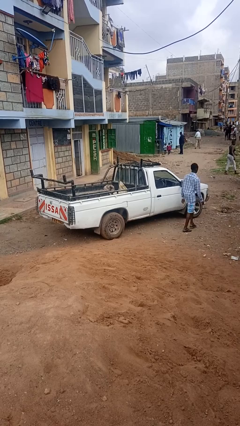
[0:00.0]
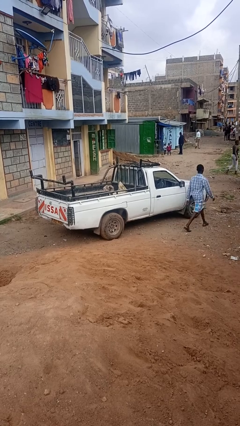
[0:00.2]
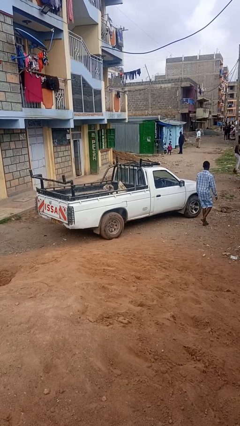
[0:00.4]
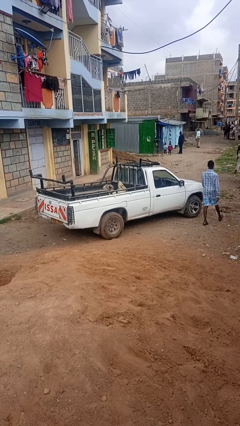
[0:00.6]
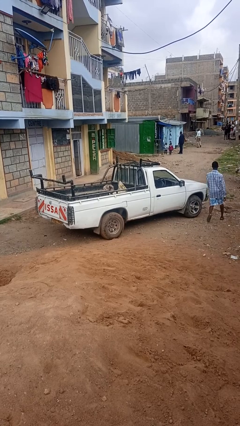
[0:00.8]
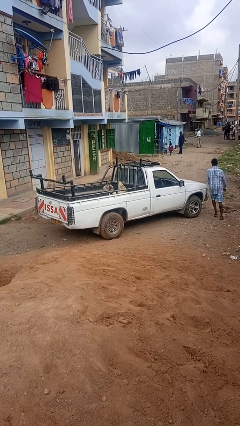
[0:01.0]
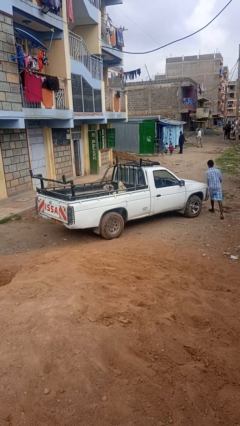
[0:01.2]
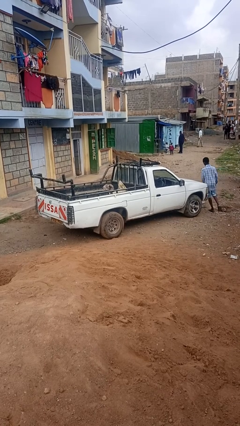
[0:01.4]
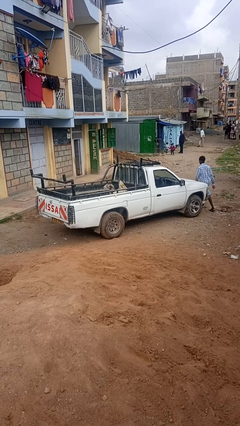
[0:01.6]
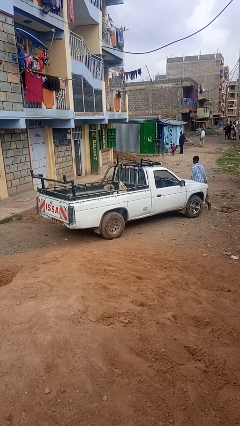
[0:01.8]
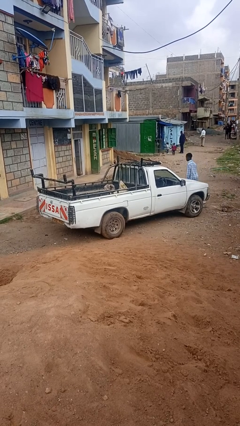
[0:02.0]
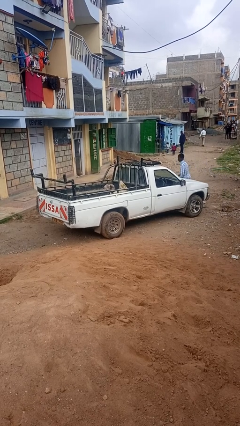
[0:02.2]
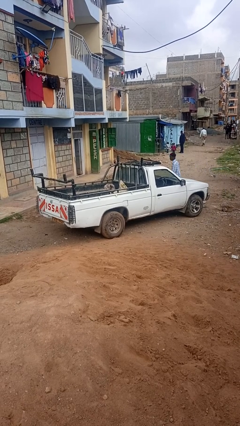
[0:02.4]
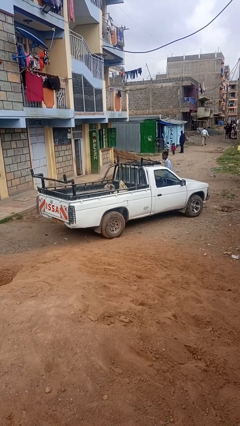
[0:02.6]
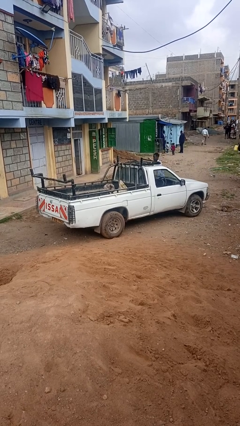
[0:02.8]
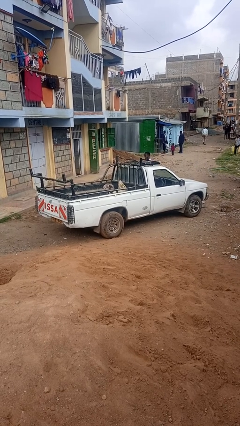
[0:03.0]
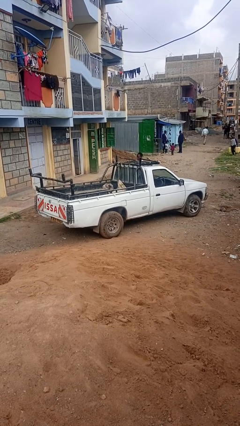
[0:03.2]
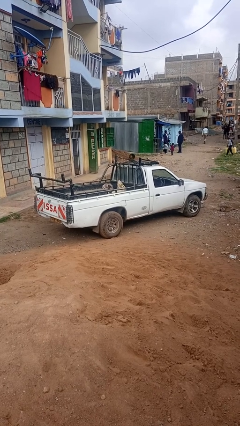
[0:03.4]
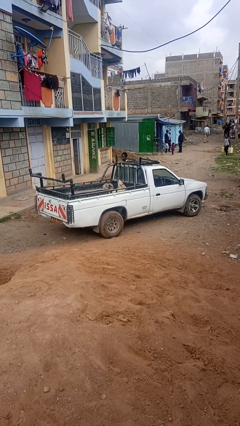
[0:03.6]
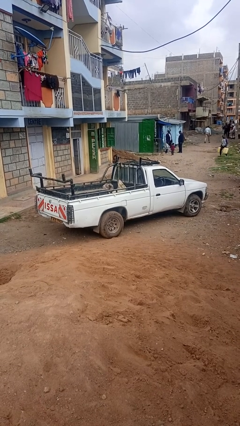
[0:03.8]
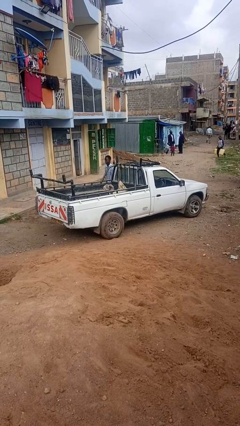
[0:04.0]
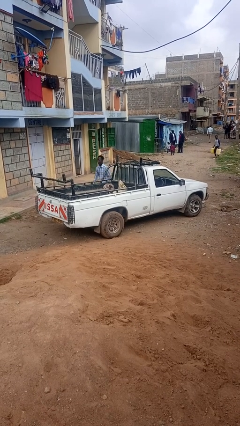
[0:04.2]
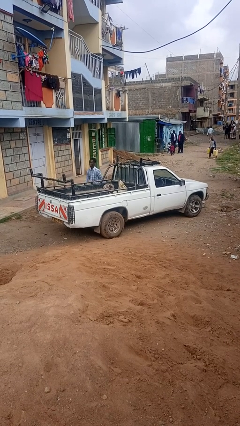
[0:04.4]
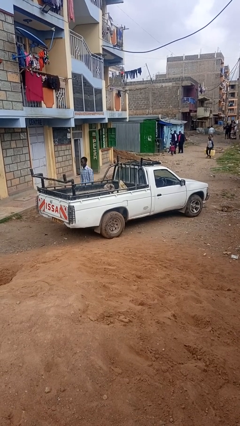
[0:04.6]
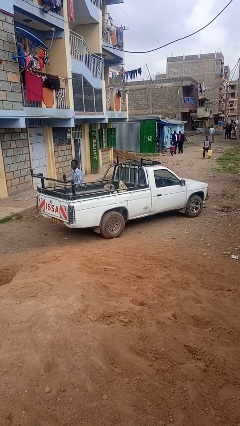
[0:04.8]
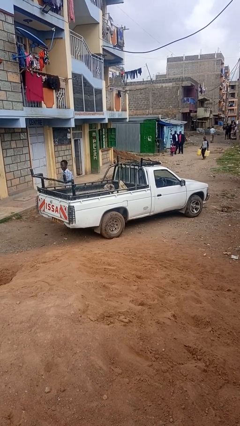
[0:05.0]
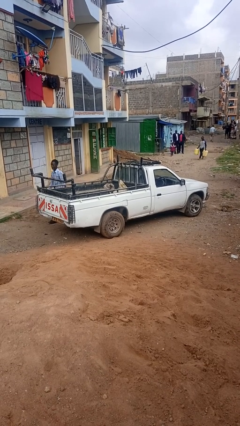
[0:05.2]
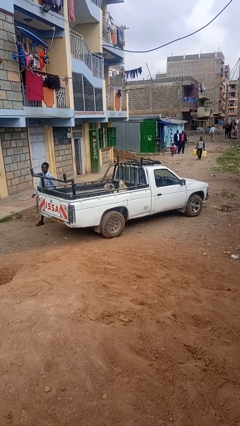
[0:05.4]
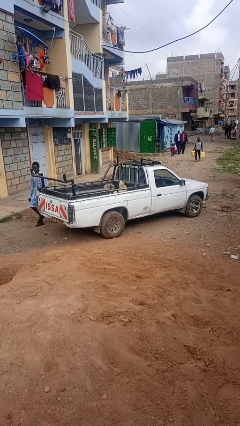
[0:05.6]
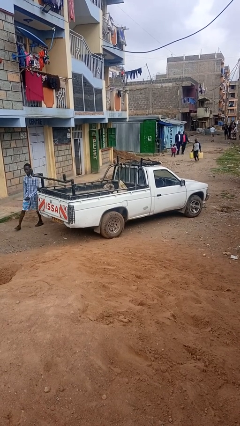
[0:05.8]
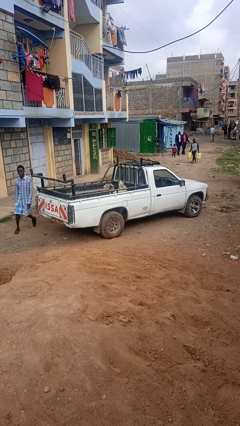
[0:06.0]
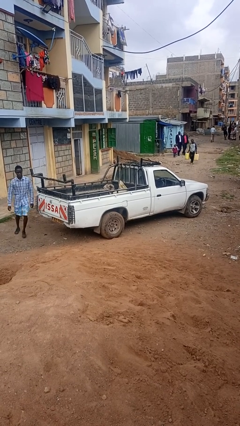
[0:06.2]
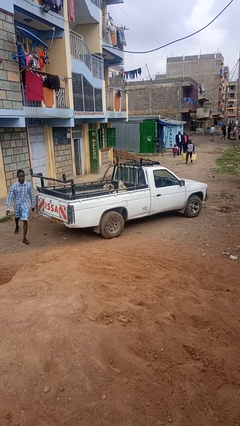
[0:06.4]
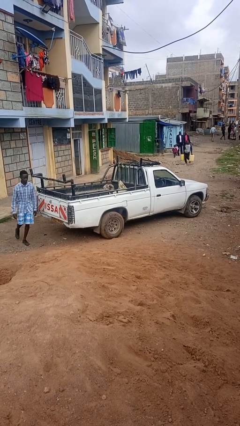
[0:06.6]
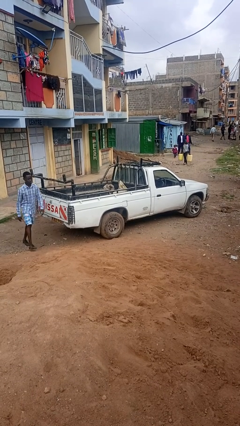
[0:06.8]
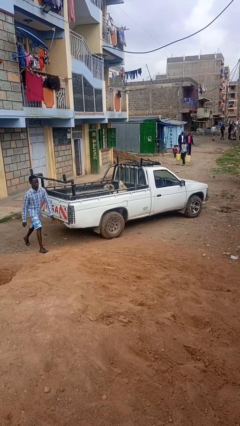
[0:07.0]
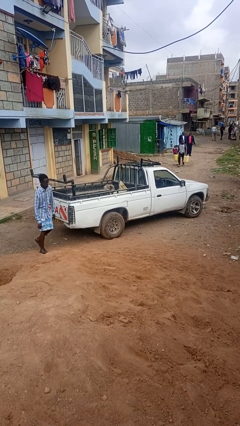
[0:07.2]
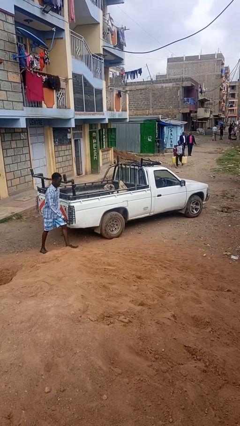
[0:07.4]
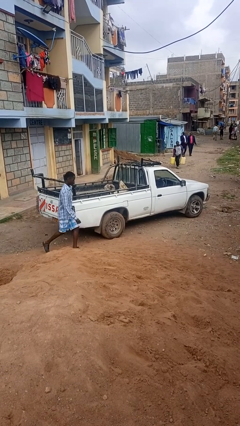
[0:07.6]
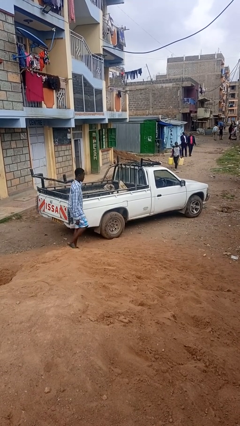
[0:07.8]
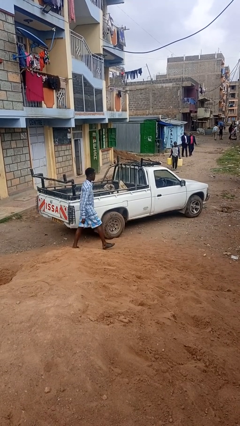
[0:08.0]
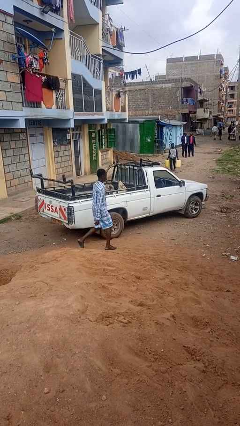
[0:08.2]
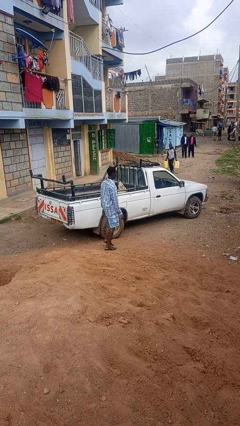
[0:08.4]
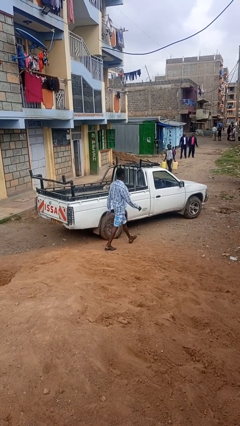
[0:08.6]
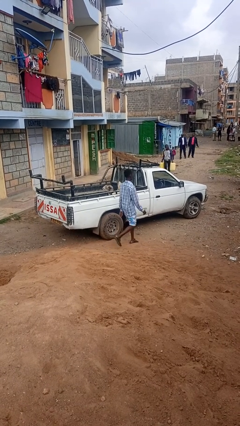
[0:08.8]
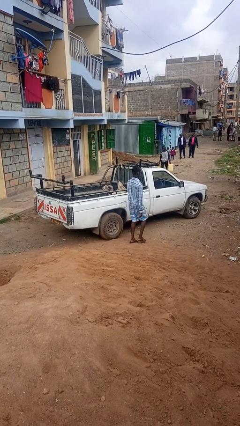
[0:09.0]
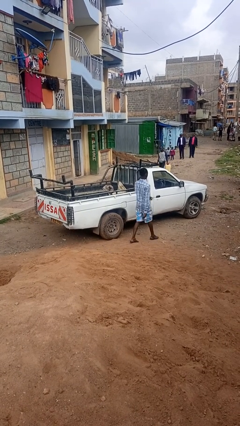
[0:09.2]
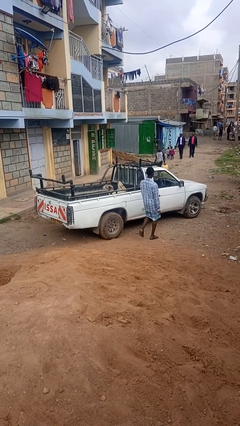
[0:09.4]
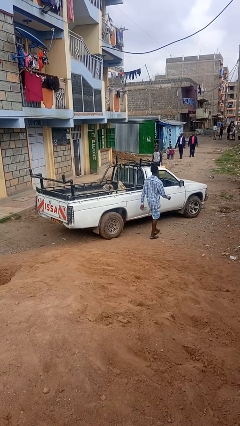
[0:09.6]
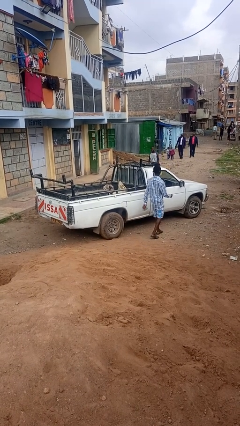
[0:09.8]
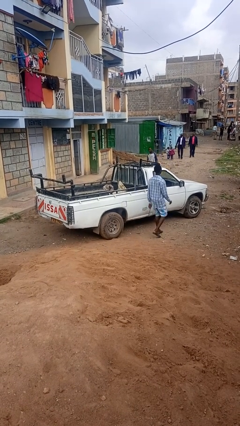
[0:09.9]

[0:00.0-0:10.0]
person walks around car

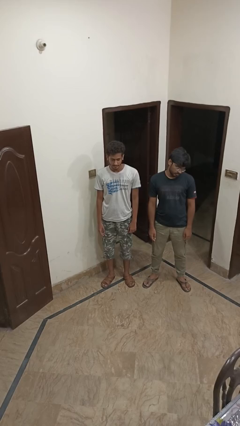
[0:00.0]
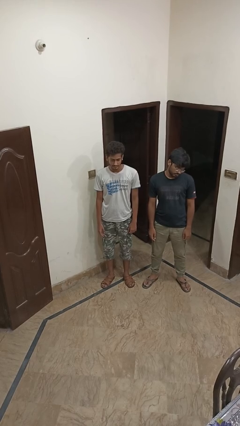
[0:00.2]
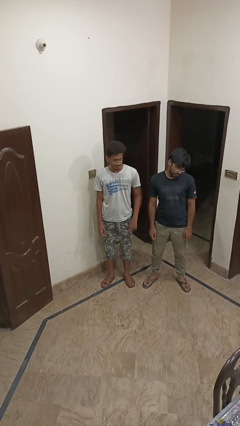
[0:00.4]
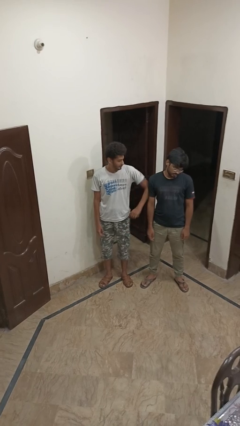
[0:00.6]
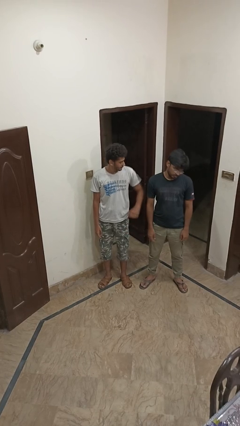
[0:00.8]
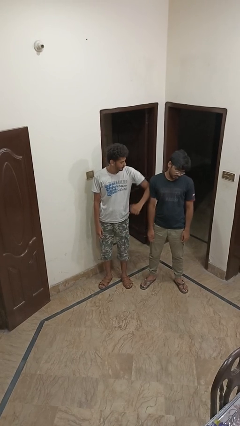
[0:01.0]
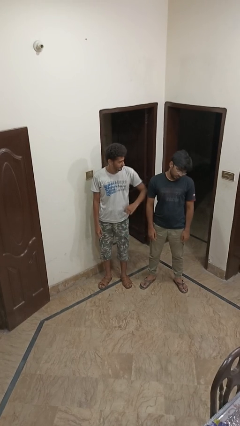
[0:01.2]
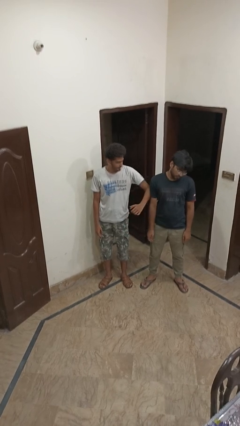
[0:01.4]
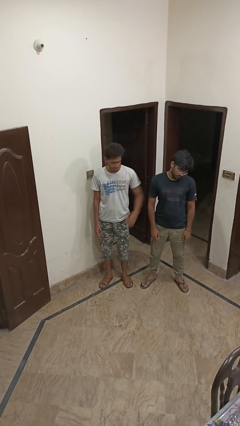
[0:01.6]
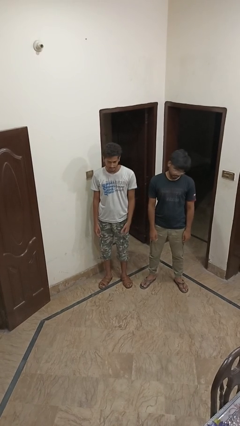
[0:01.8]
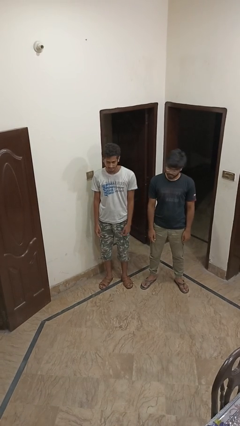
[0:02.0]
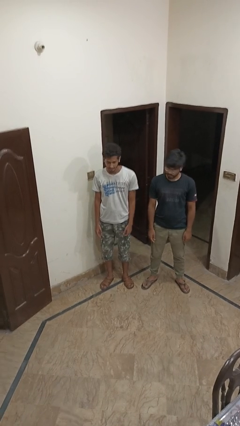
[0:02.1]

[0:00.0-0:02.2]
person nudges person with elbow

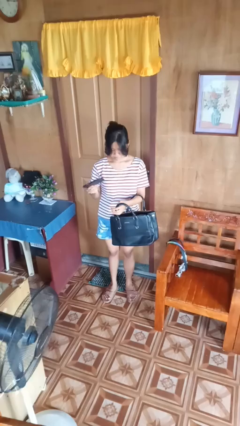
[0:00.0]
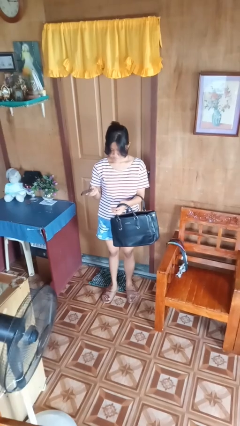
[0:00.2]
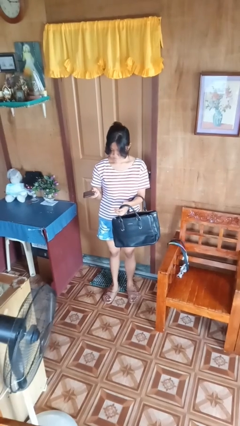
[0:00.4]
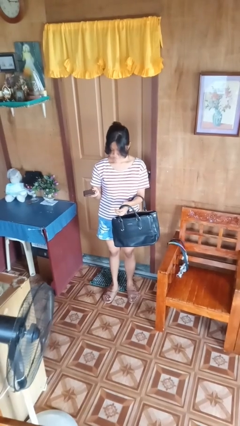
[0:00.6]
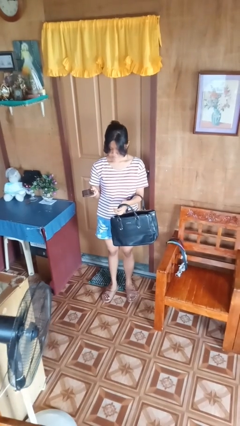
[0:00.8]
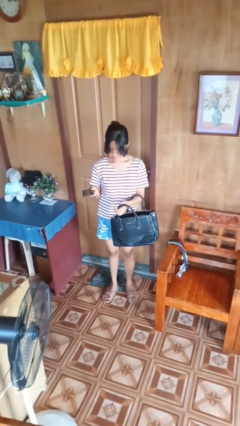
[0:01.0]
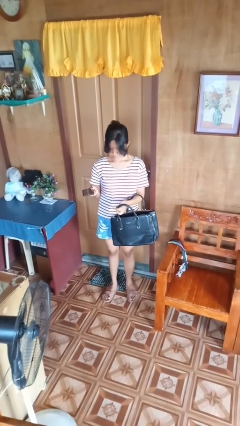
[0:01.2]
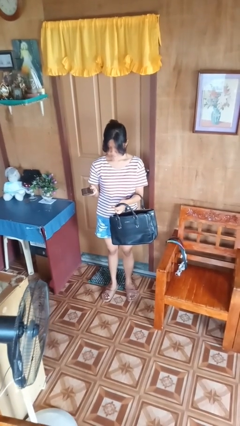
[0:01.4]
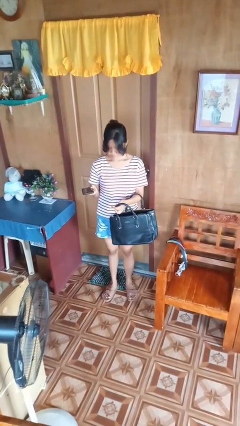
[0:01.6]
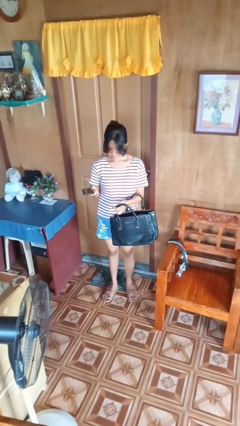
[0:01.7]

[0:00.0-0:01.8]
person takes object from purse

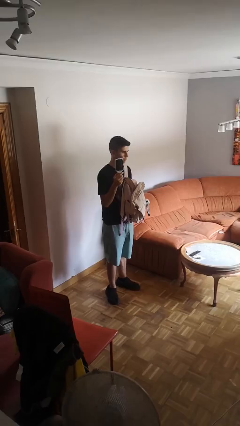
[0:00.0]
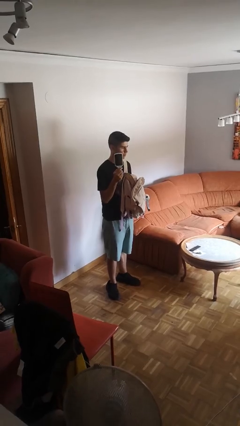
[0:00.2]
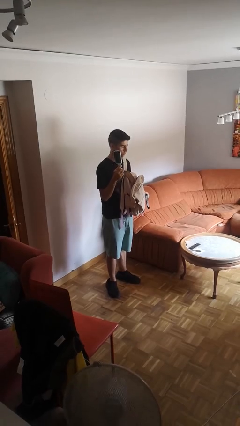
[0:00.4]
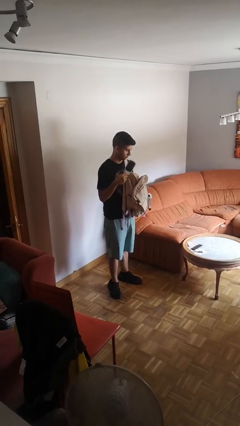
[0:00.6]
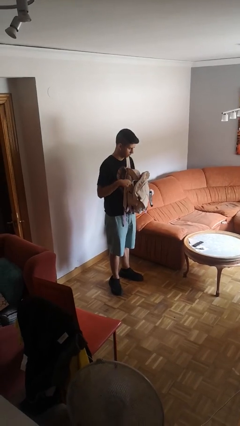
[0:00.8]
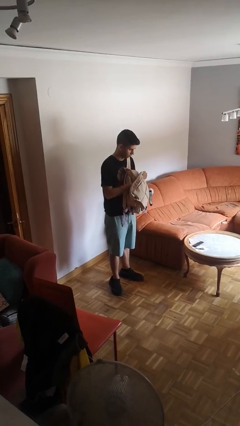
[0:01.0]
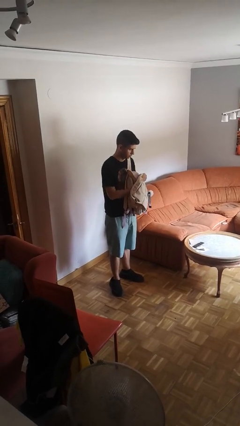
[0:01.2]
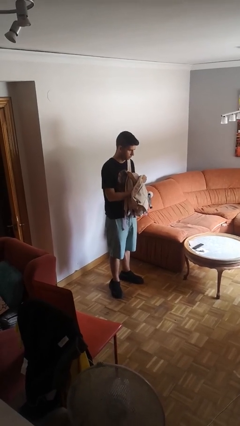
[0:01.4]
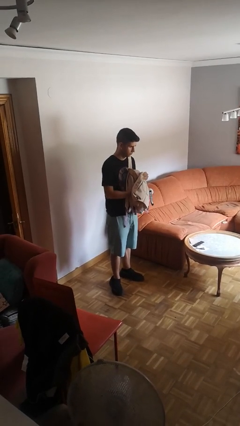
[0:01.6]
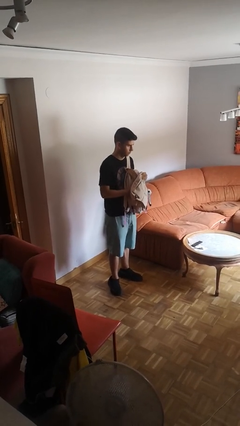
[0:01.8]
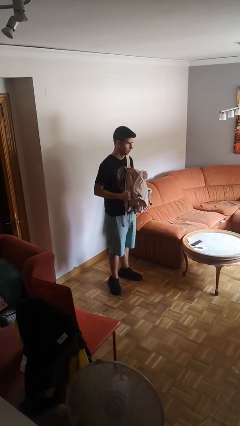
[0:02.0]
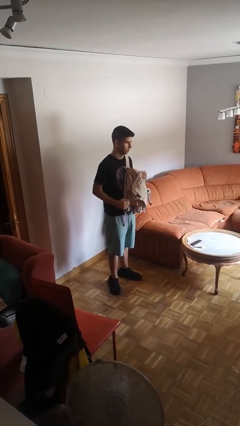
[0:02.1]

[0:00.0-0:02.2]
person puts object into backpack

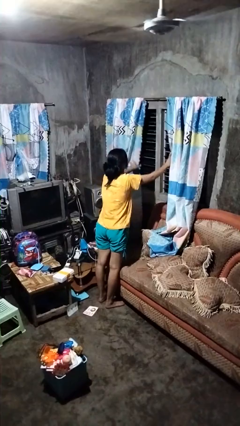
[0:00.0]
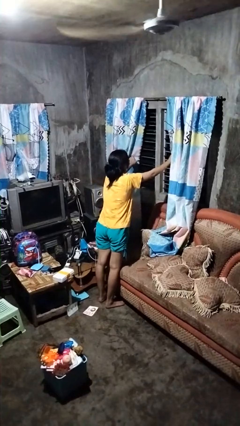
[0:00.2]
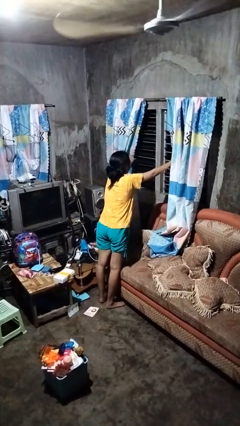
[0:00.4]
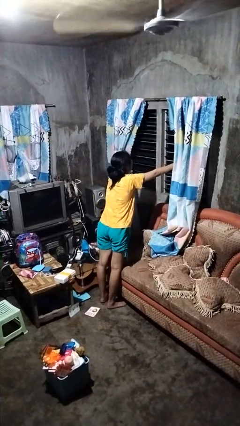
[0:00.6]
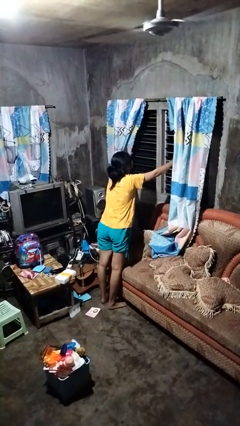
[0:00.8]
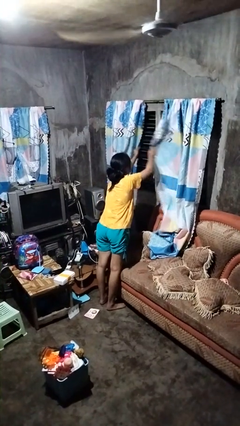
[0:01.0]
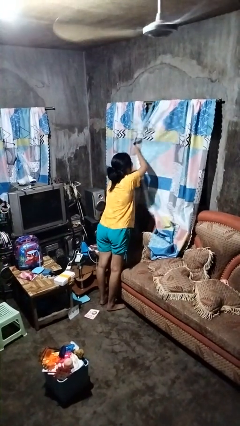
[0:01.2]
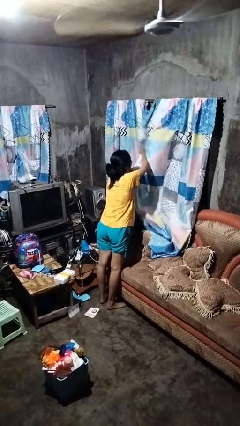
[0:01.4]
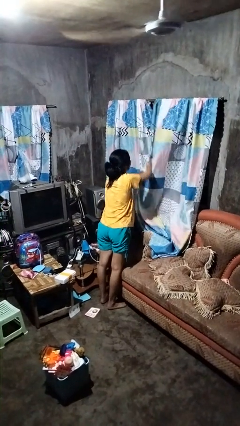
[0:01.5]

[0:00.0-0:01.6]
person closes curtains
